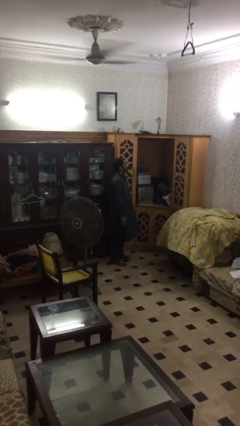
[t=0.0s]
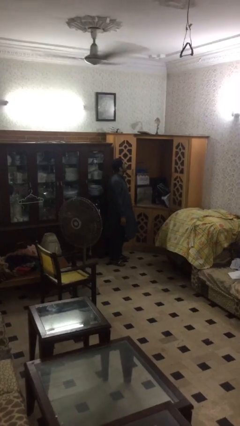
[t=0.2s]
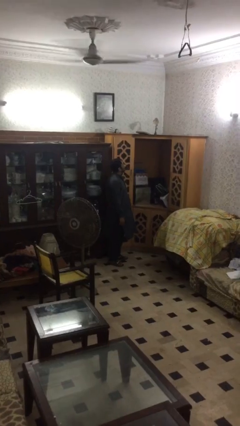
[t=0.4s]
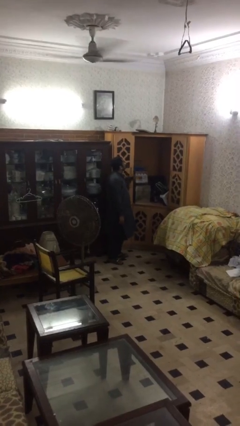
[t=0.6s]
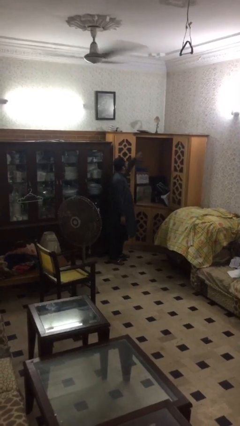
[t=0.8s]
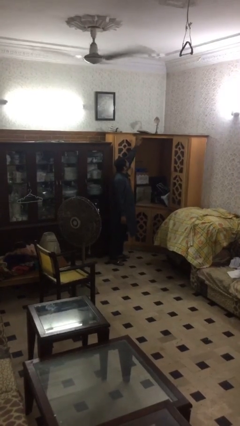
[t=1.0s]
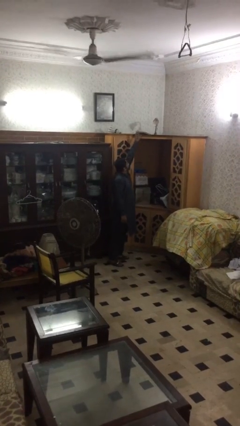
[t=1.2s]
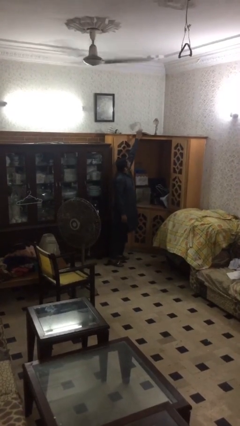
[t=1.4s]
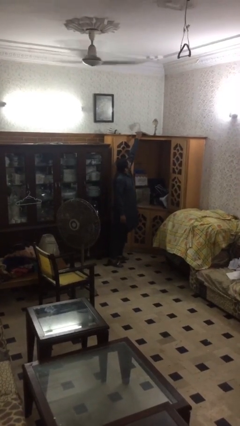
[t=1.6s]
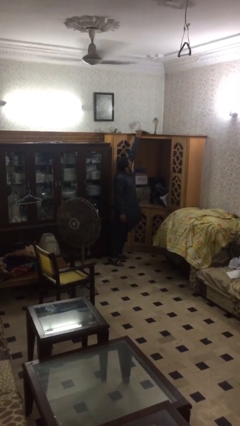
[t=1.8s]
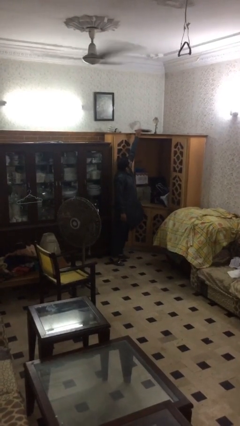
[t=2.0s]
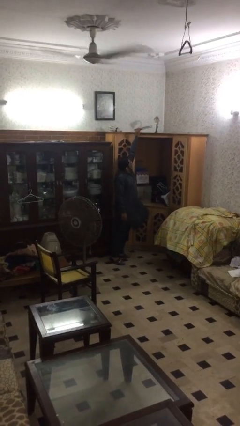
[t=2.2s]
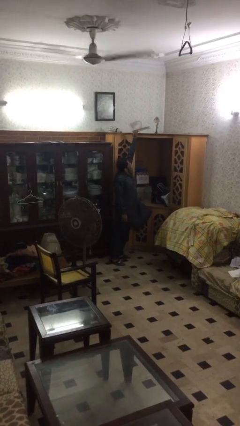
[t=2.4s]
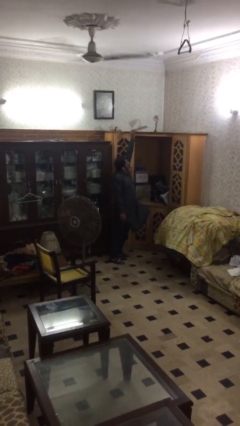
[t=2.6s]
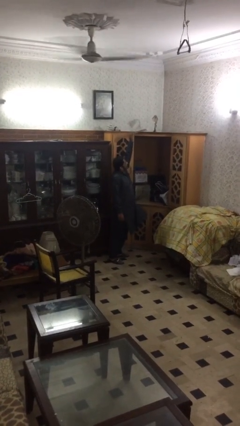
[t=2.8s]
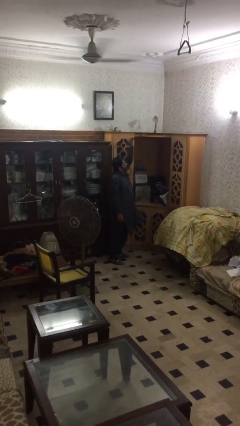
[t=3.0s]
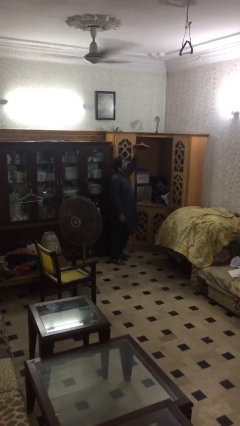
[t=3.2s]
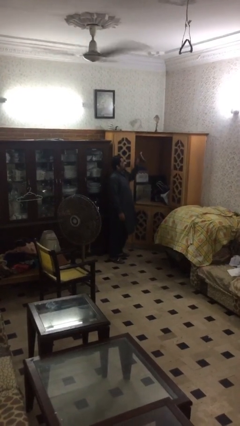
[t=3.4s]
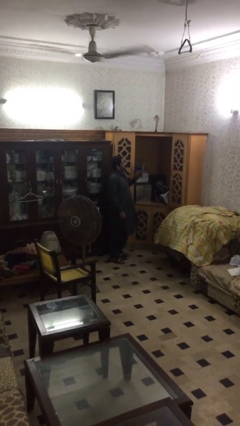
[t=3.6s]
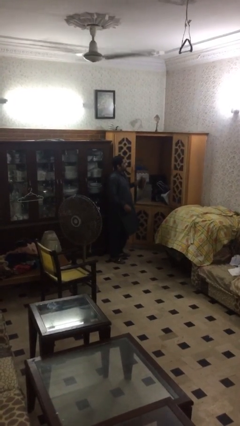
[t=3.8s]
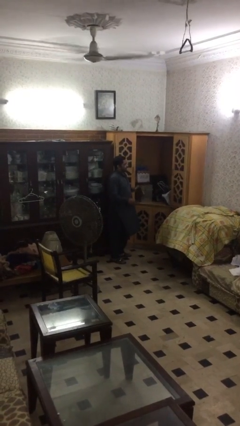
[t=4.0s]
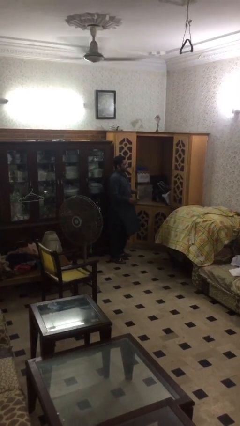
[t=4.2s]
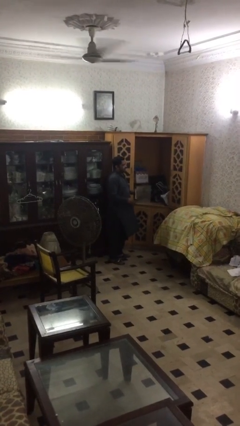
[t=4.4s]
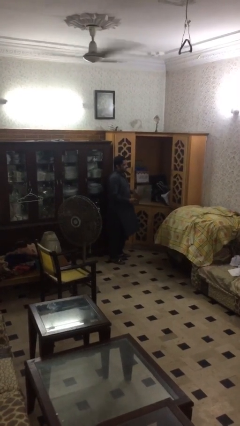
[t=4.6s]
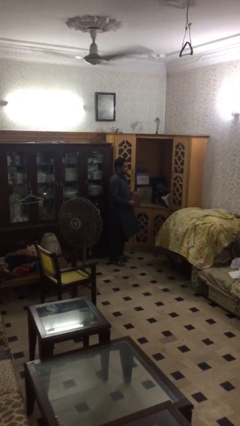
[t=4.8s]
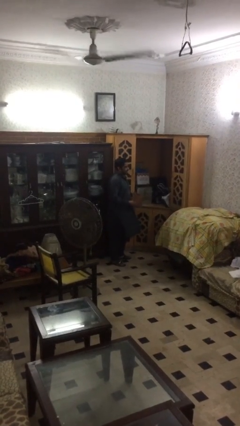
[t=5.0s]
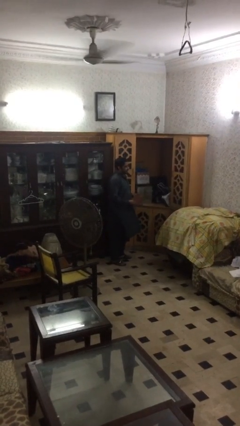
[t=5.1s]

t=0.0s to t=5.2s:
person picks up object from shelf

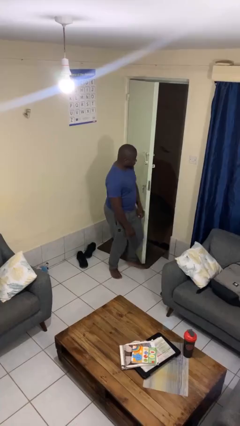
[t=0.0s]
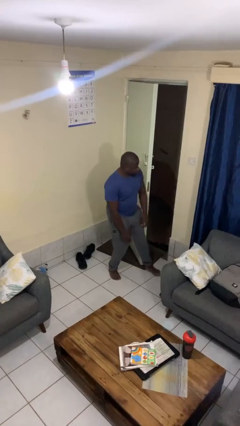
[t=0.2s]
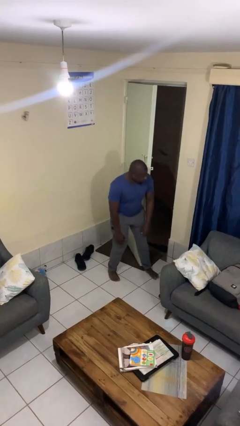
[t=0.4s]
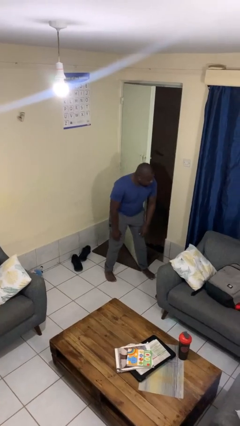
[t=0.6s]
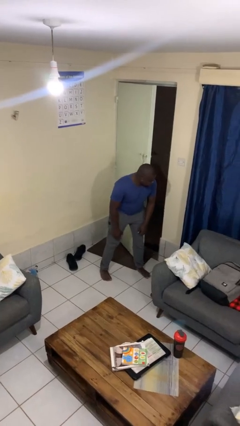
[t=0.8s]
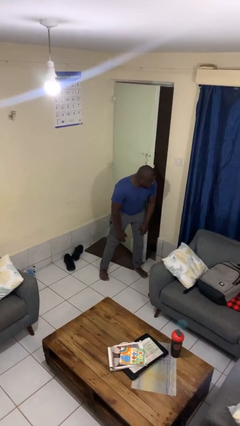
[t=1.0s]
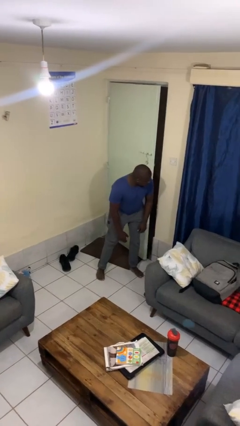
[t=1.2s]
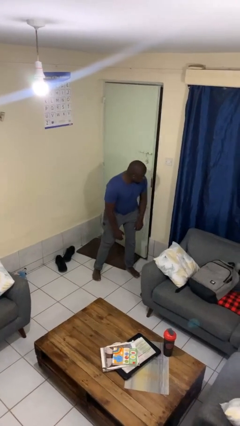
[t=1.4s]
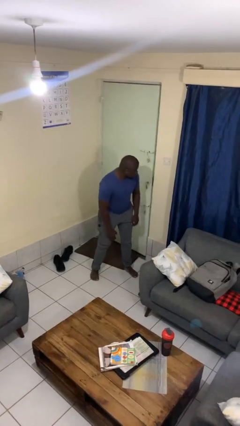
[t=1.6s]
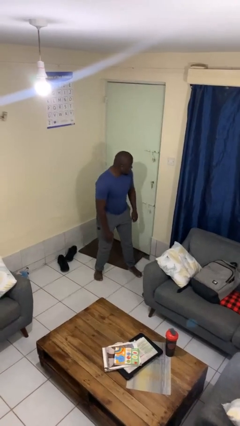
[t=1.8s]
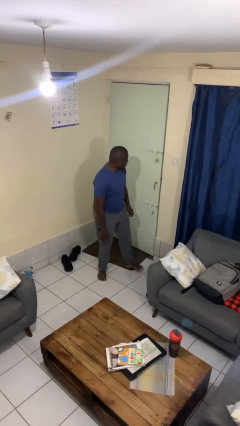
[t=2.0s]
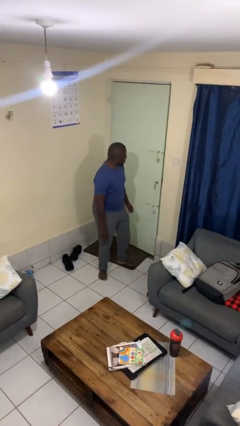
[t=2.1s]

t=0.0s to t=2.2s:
person closes door with hip

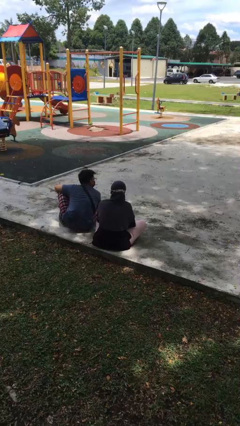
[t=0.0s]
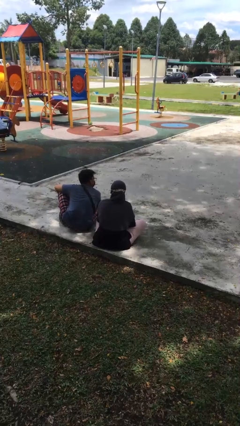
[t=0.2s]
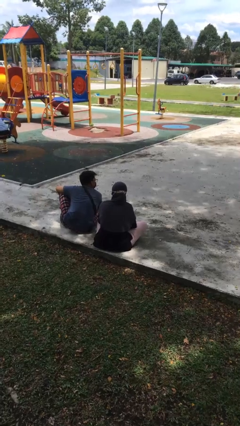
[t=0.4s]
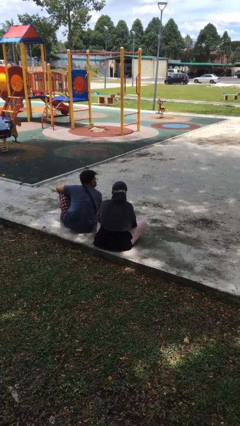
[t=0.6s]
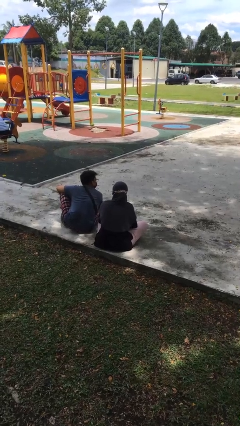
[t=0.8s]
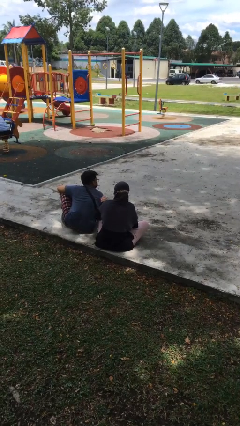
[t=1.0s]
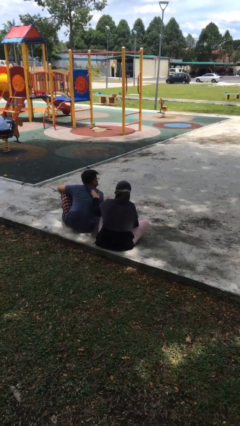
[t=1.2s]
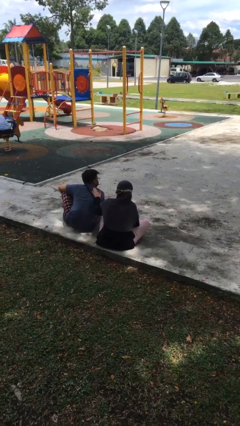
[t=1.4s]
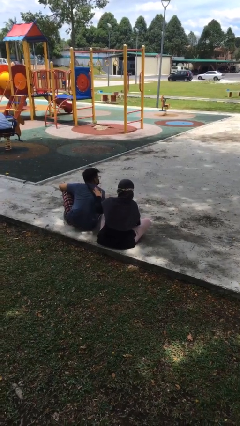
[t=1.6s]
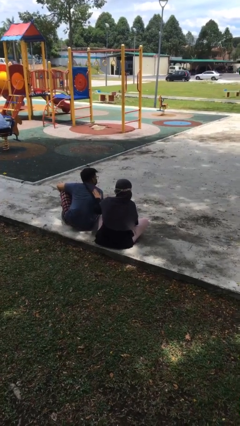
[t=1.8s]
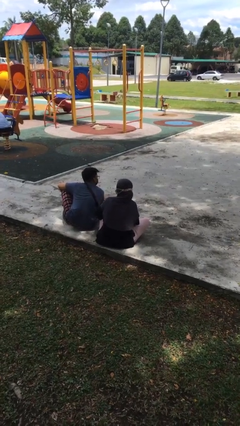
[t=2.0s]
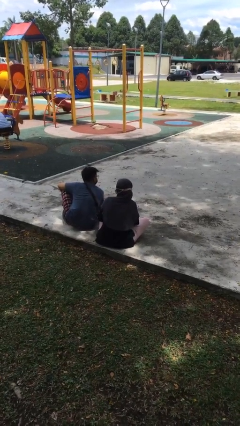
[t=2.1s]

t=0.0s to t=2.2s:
person touches back of person

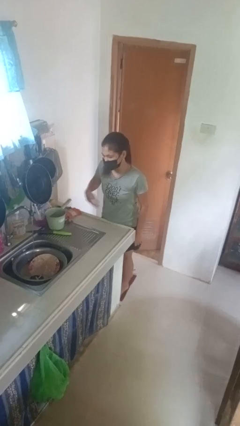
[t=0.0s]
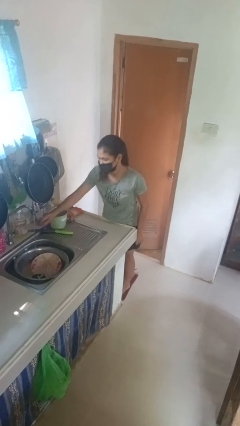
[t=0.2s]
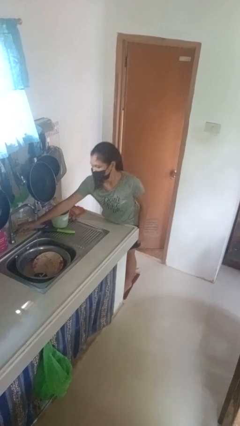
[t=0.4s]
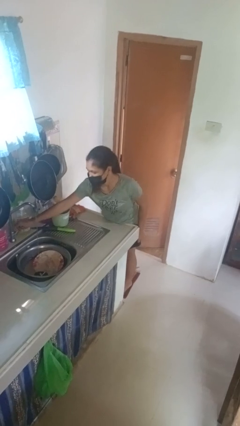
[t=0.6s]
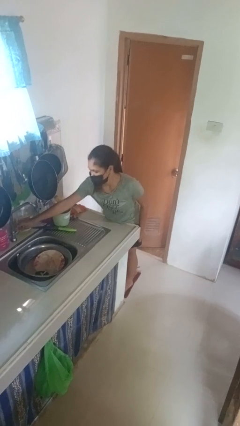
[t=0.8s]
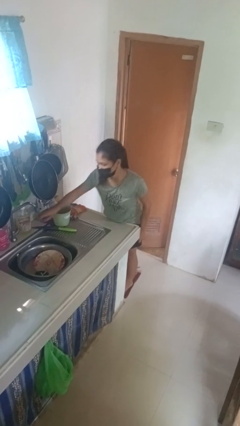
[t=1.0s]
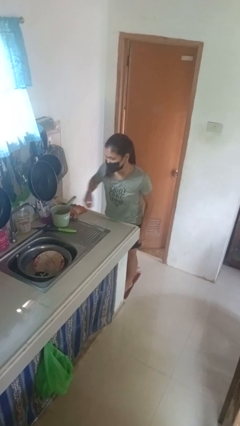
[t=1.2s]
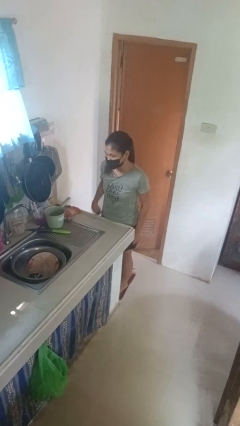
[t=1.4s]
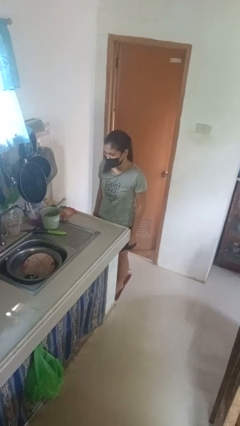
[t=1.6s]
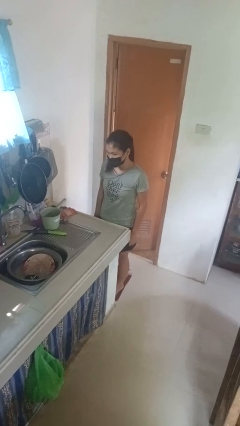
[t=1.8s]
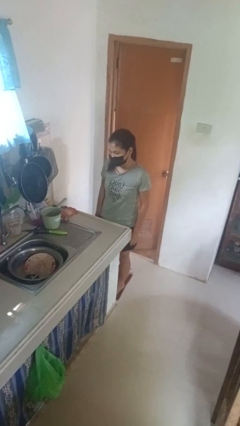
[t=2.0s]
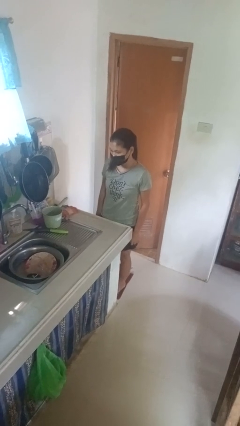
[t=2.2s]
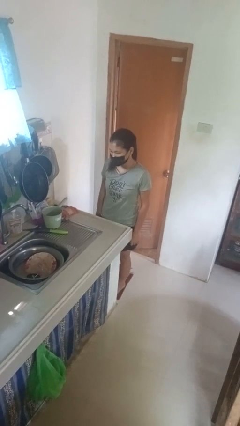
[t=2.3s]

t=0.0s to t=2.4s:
person turns off faucet

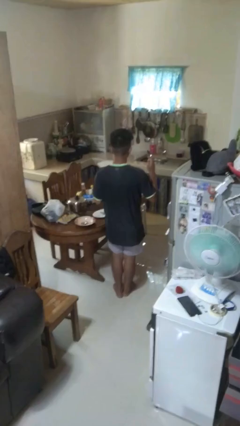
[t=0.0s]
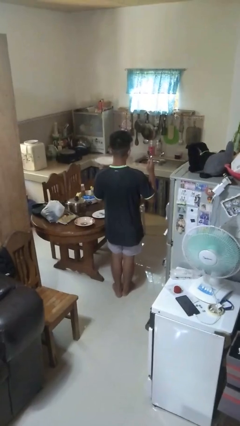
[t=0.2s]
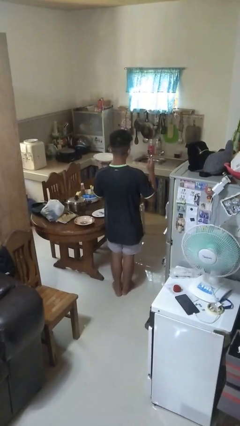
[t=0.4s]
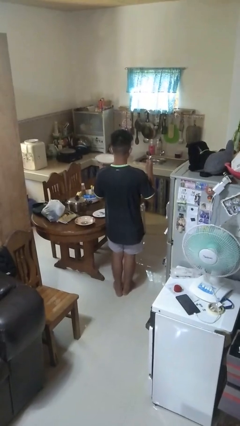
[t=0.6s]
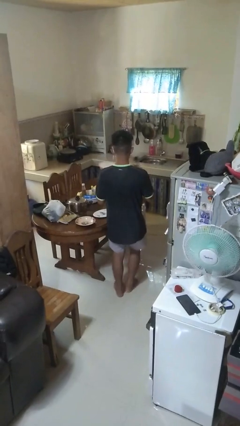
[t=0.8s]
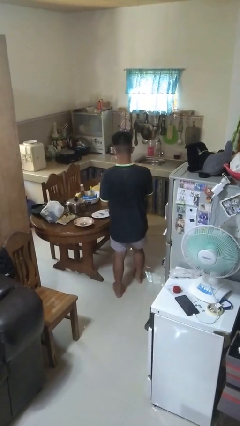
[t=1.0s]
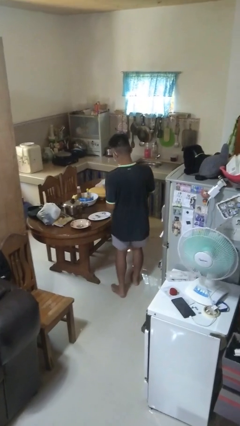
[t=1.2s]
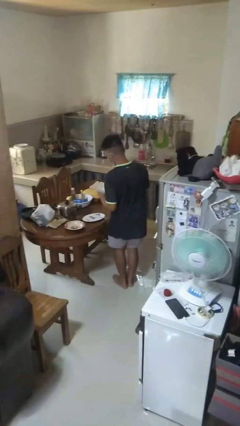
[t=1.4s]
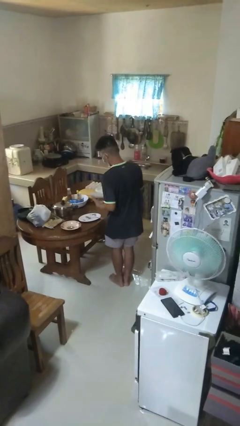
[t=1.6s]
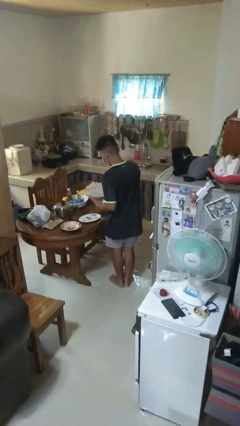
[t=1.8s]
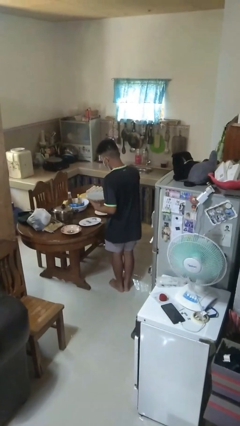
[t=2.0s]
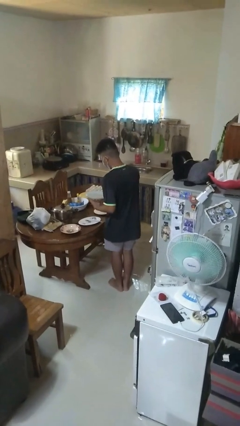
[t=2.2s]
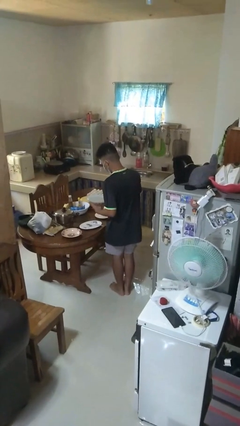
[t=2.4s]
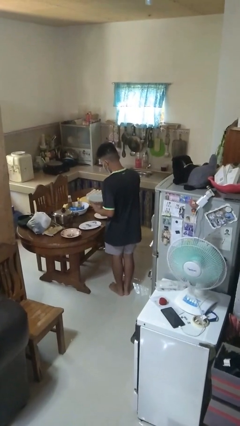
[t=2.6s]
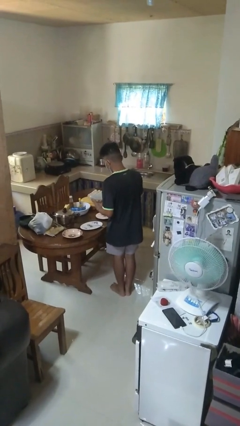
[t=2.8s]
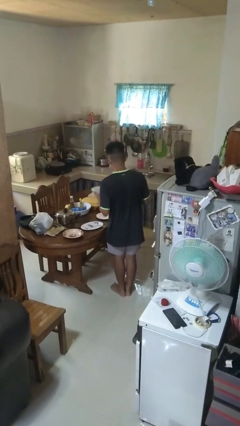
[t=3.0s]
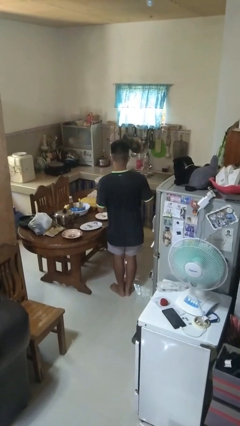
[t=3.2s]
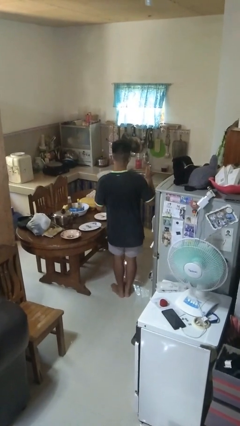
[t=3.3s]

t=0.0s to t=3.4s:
person sets table

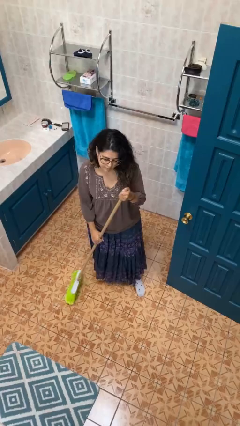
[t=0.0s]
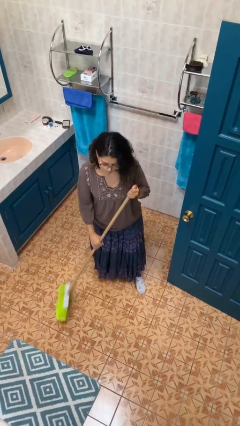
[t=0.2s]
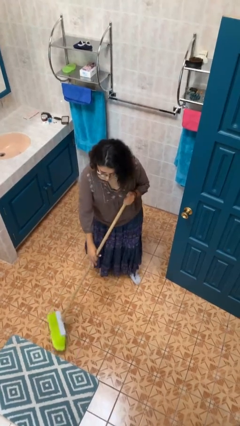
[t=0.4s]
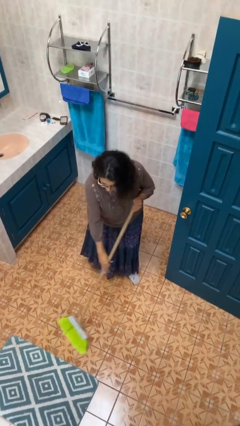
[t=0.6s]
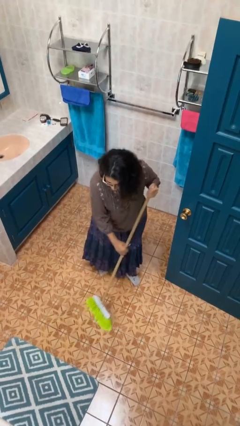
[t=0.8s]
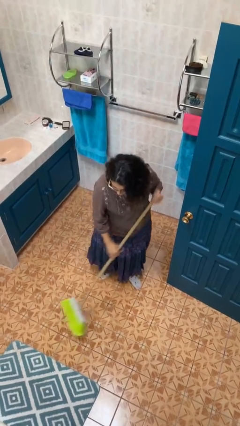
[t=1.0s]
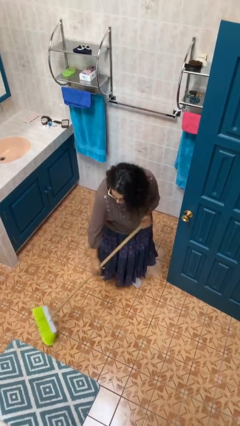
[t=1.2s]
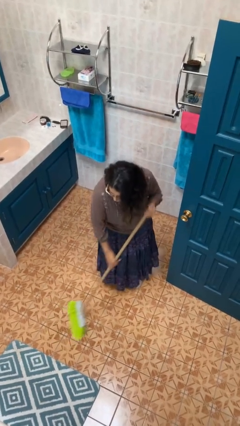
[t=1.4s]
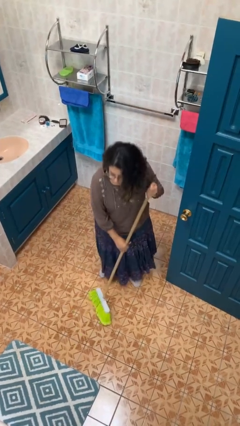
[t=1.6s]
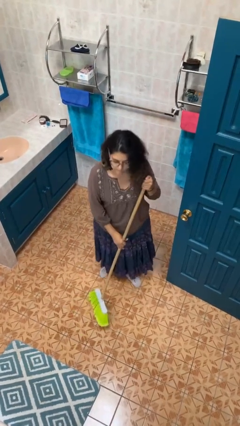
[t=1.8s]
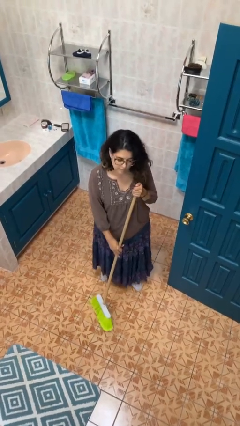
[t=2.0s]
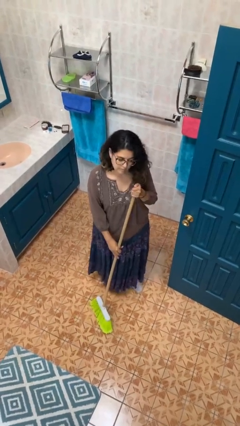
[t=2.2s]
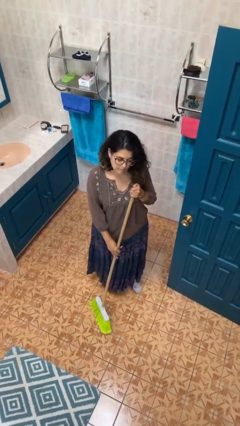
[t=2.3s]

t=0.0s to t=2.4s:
person sweeps floor
